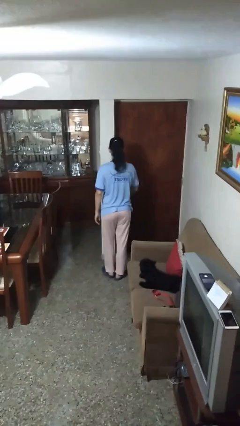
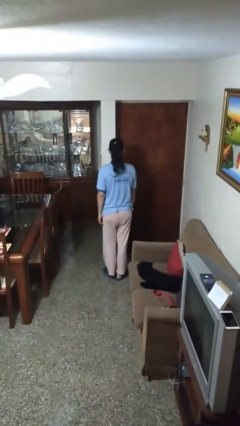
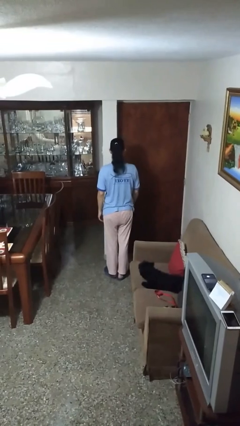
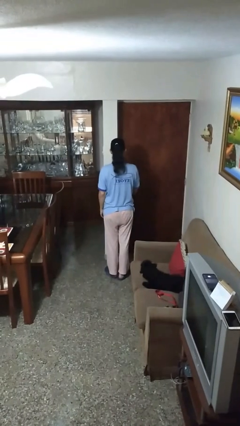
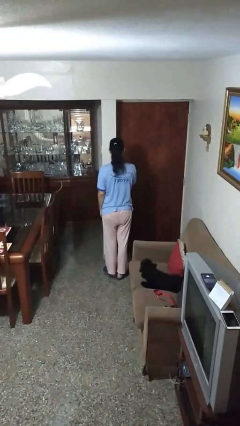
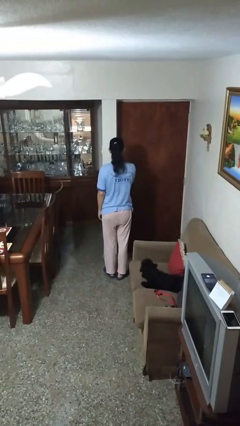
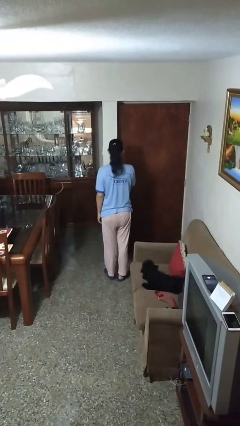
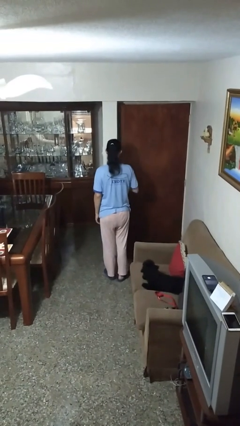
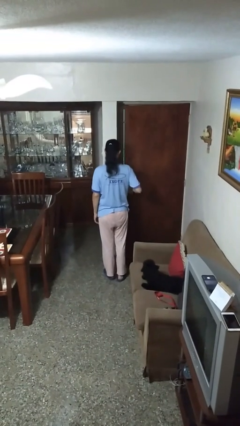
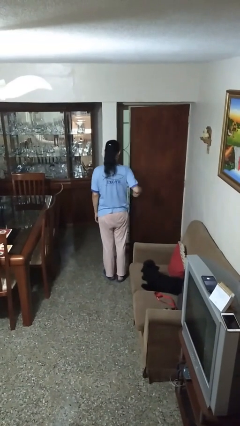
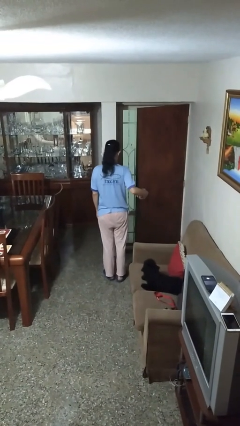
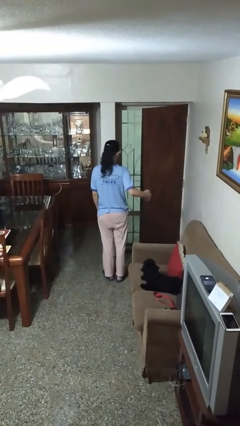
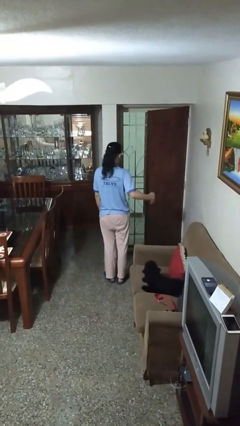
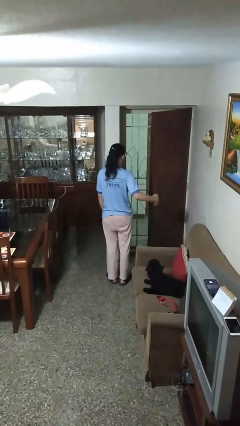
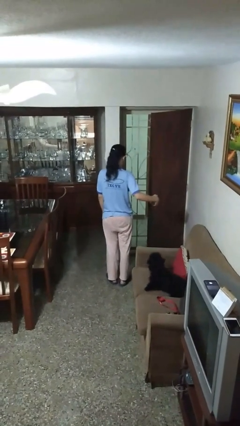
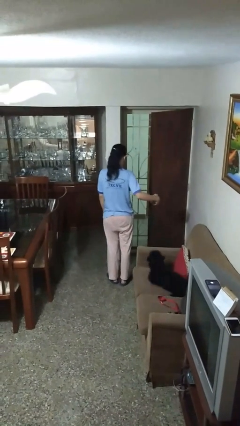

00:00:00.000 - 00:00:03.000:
person opens facility door

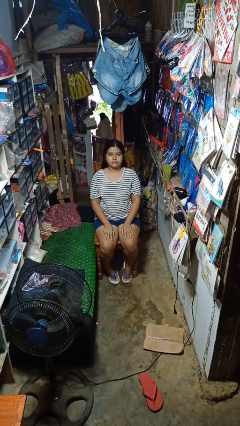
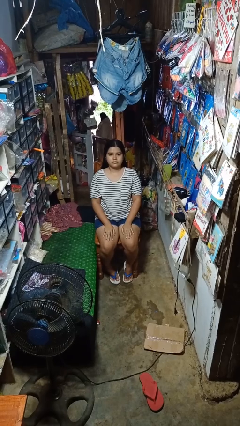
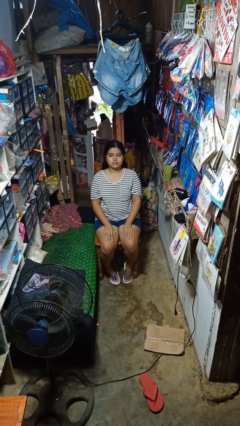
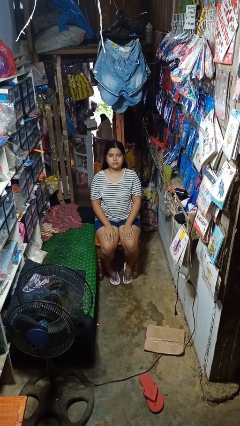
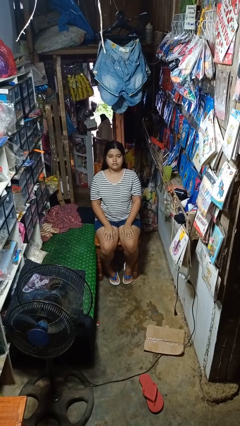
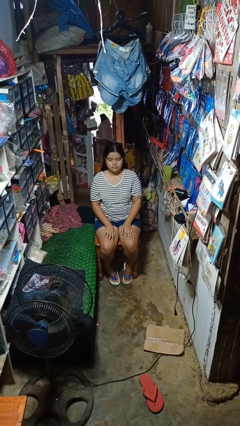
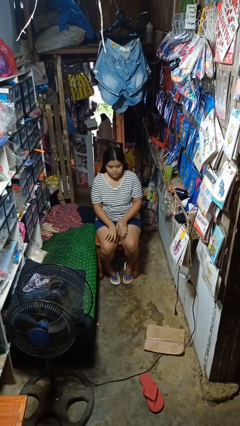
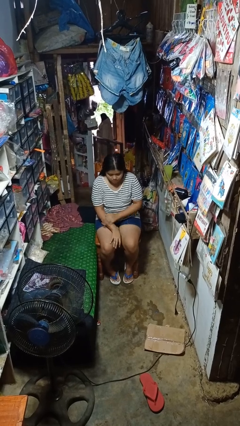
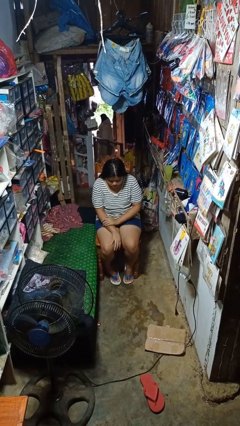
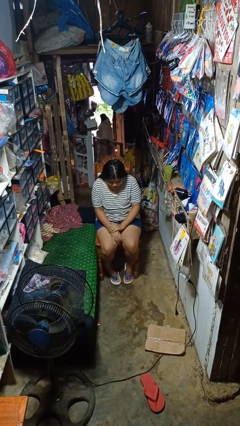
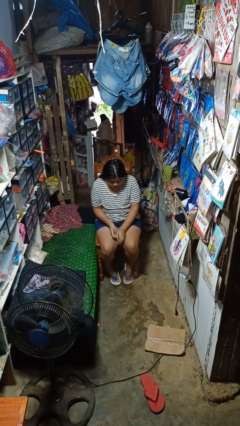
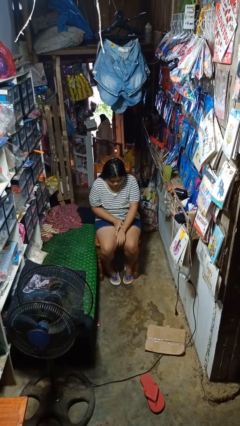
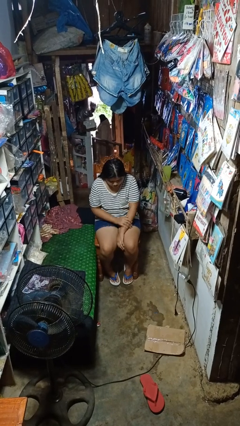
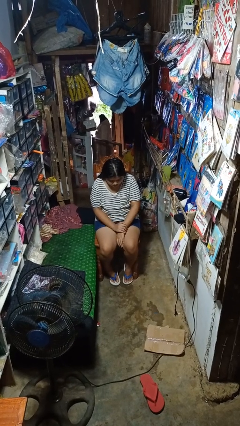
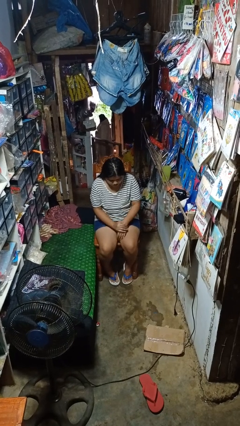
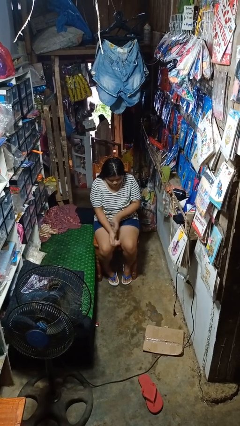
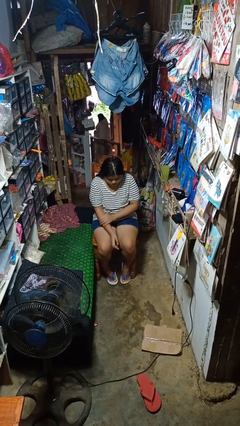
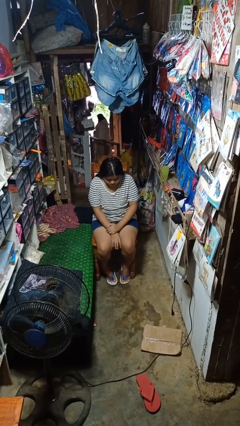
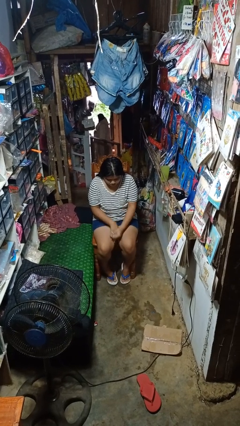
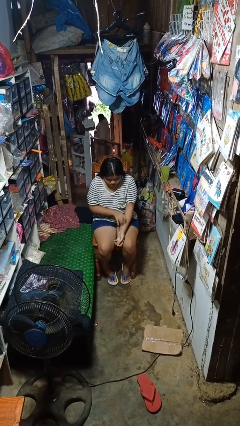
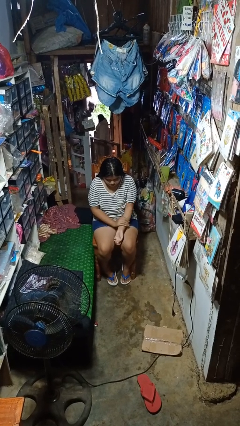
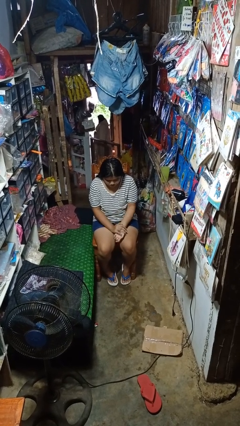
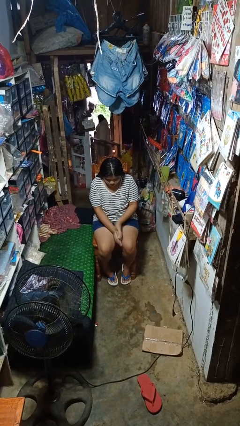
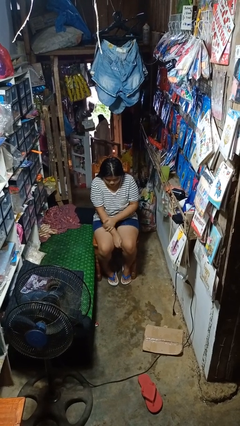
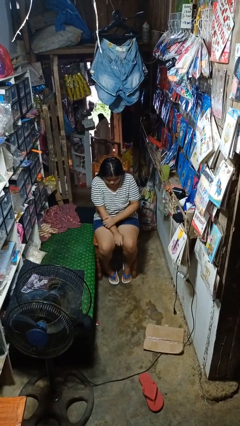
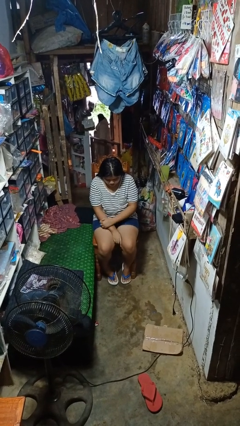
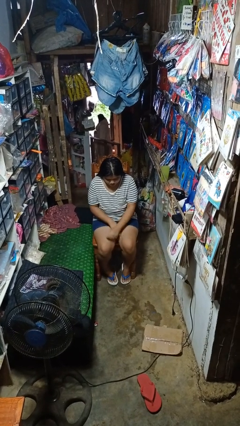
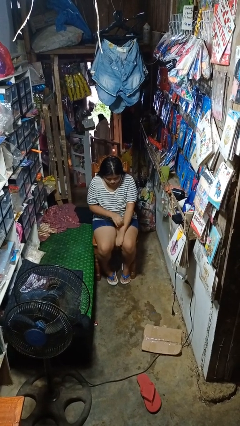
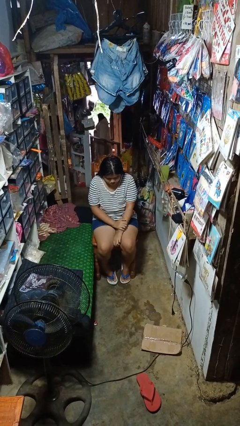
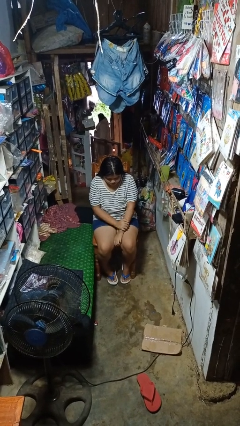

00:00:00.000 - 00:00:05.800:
person looks at hands in lap

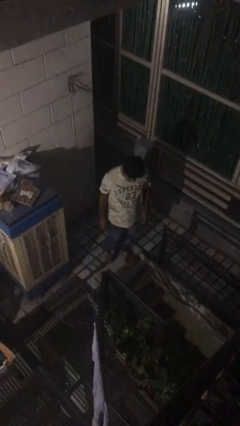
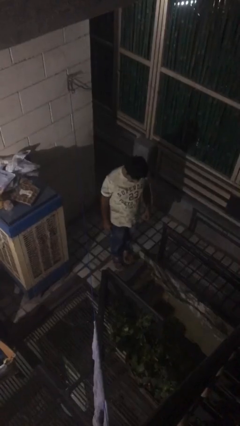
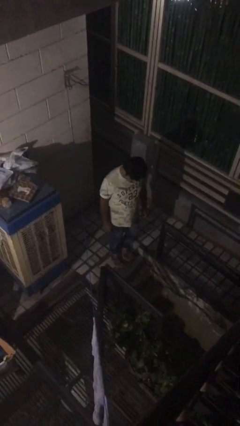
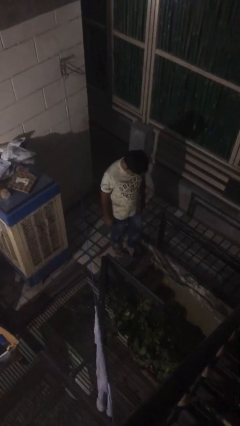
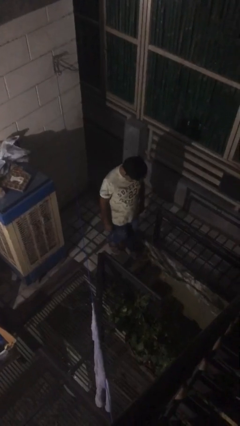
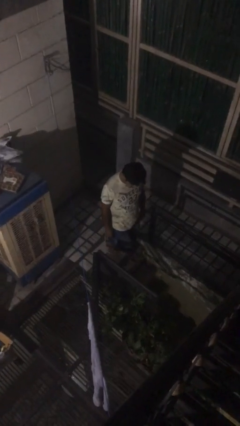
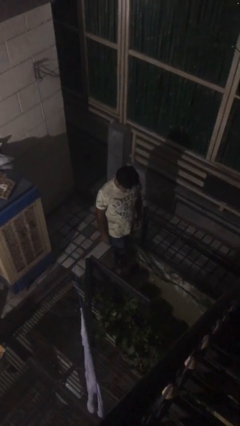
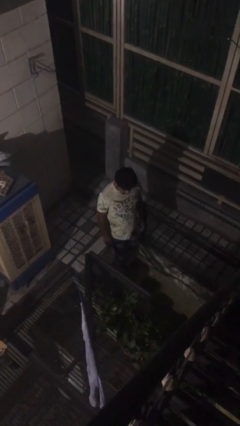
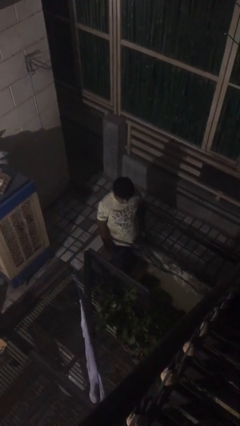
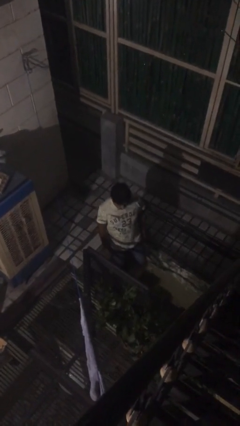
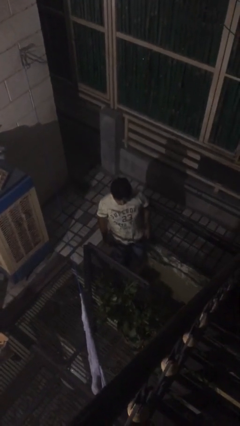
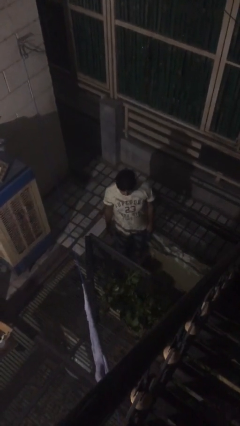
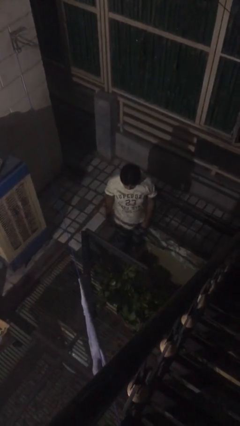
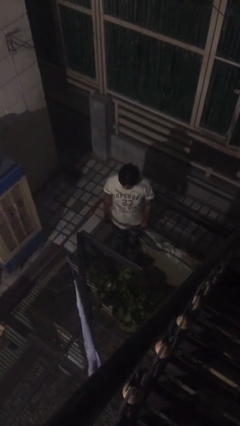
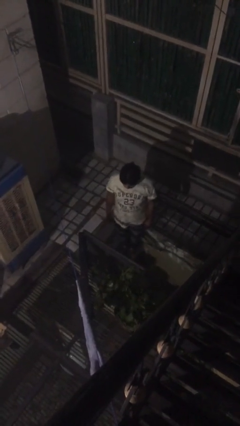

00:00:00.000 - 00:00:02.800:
person climbs down stairs

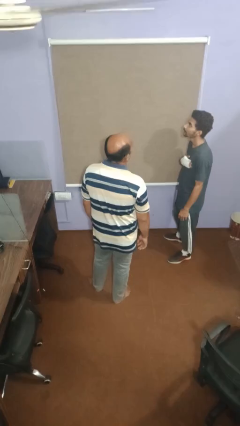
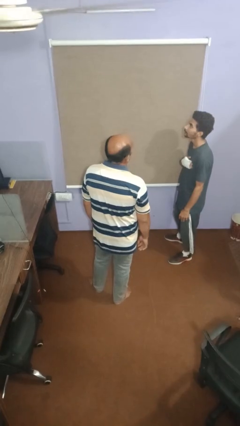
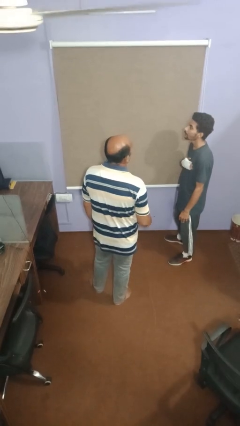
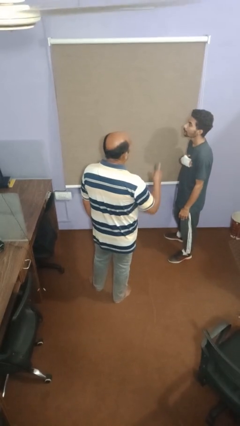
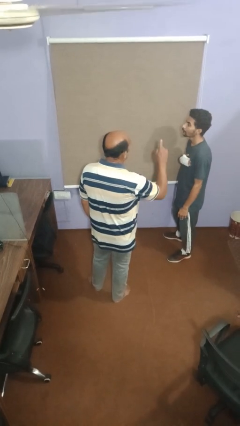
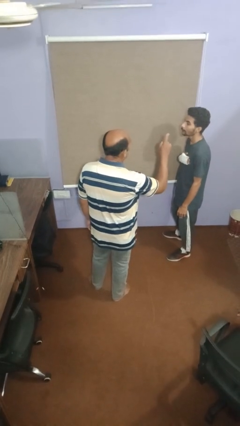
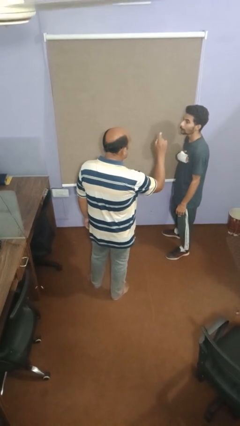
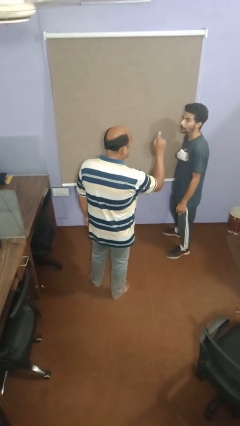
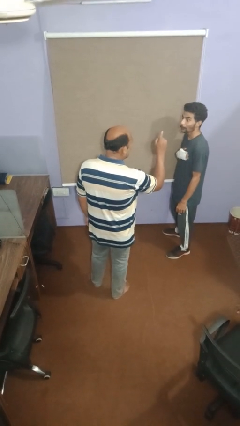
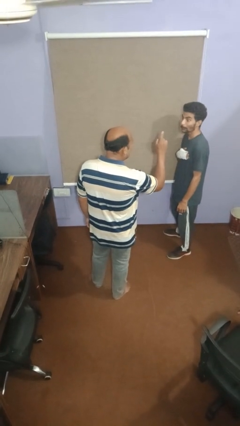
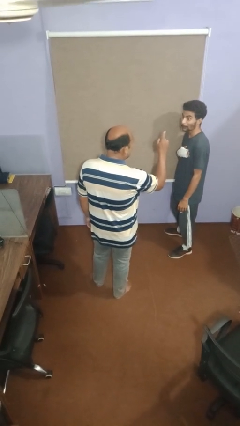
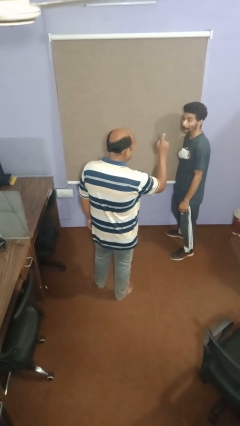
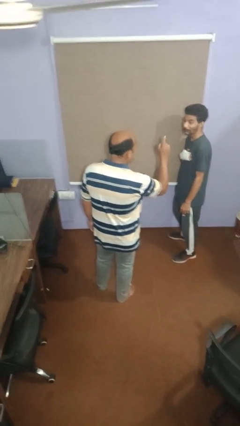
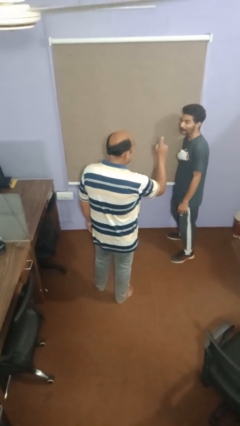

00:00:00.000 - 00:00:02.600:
person points at person

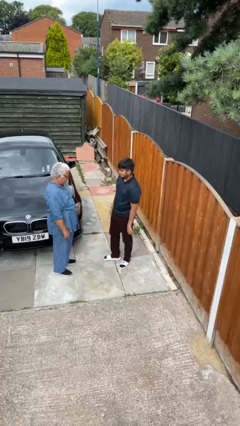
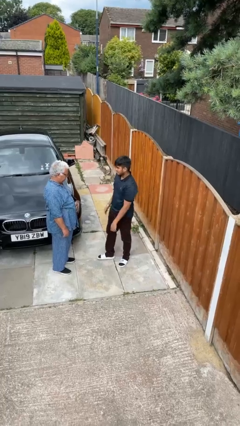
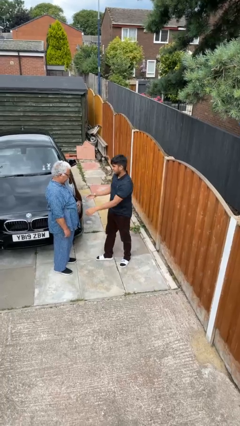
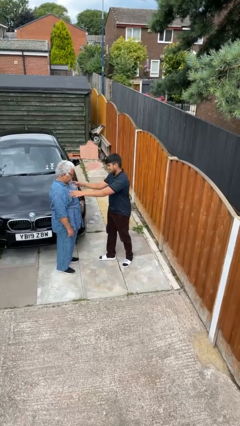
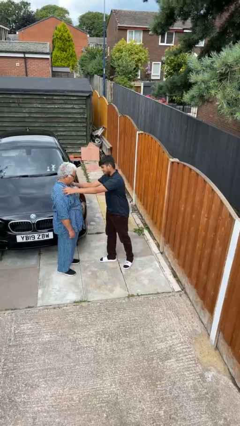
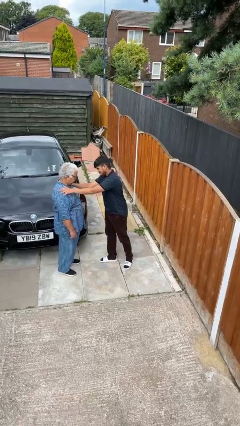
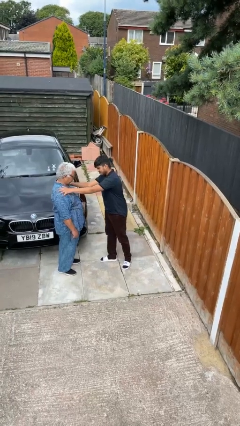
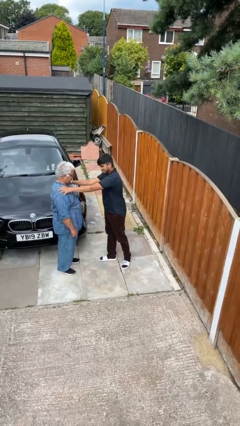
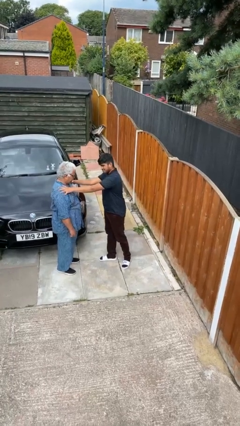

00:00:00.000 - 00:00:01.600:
person shoves person

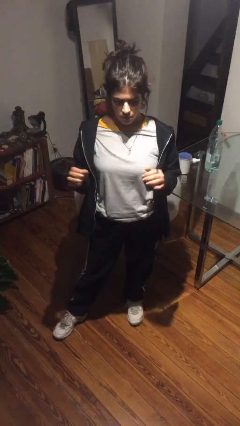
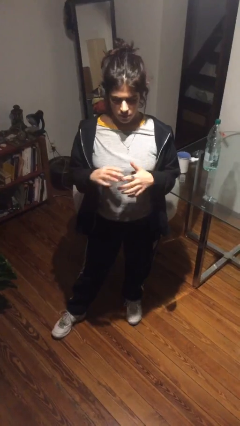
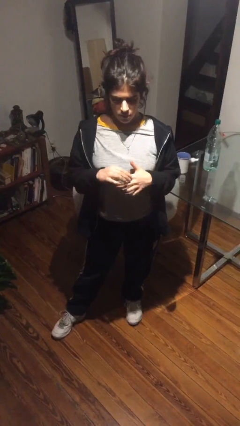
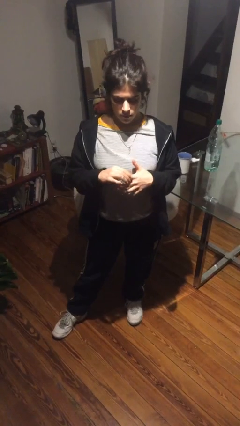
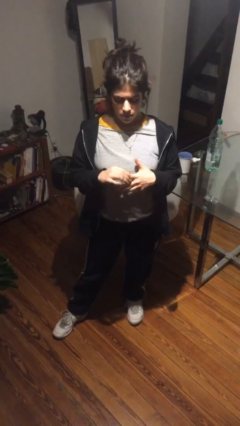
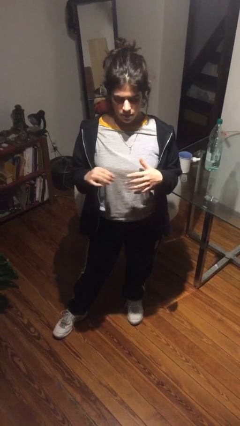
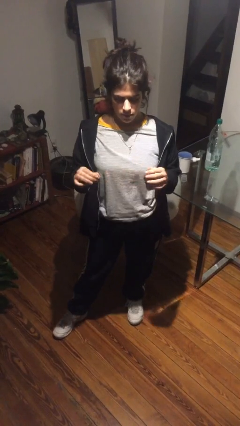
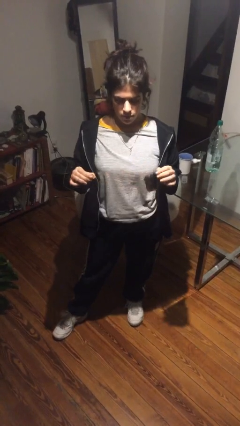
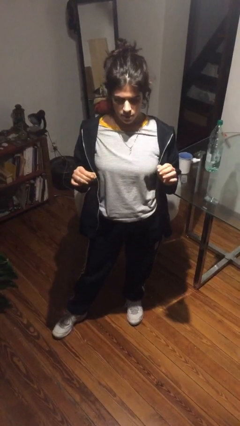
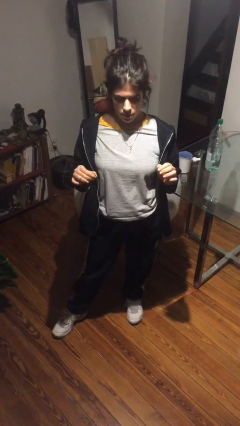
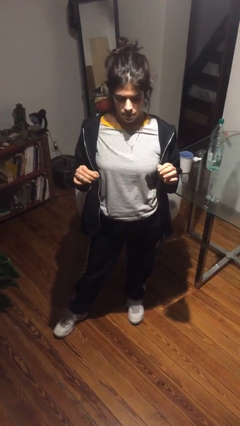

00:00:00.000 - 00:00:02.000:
person takes off ring
